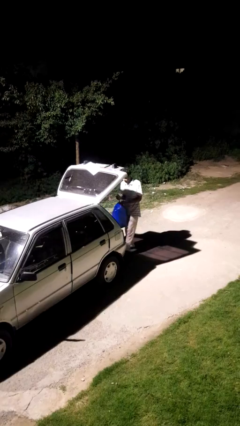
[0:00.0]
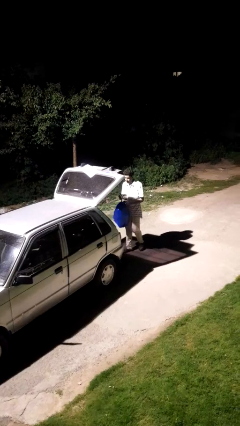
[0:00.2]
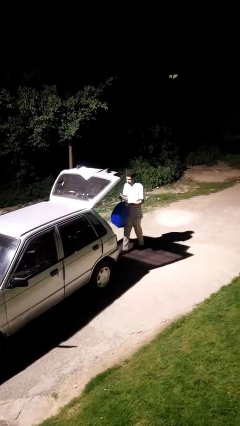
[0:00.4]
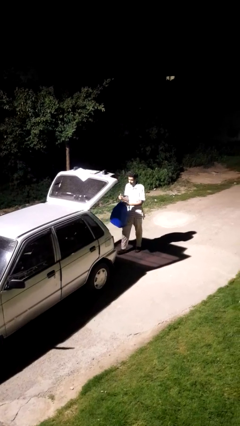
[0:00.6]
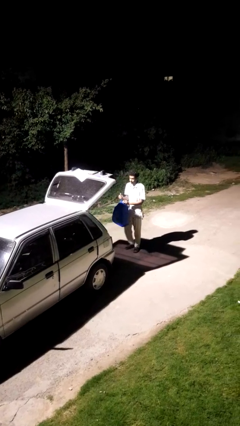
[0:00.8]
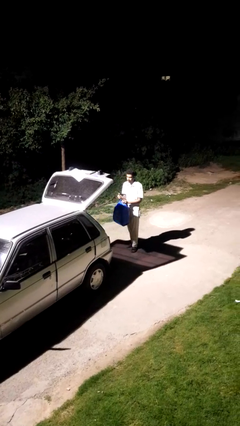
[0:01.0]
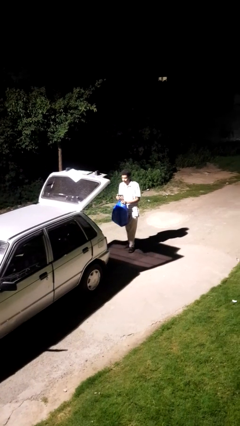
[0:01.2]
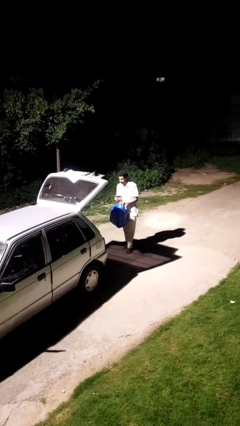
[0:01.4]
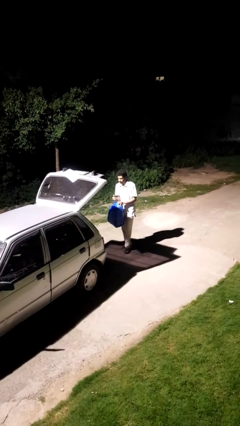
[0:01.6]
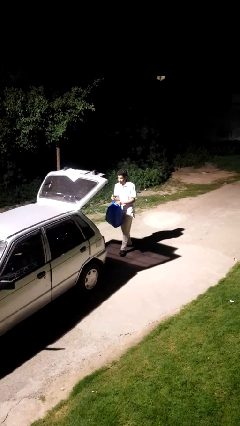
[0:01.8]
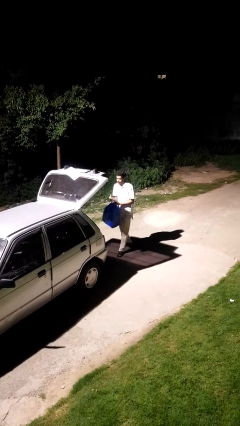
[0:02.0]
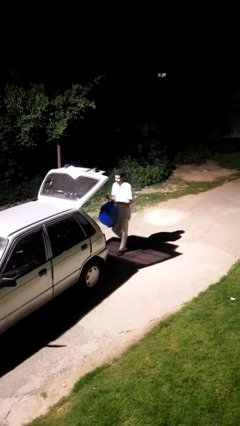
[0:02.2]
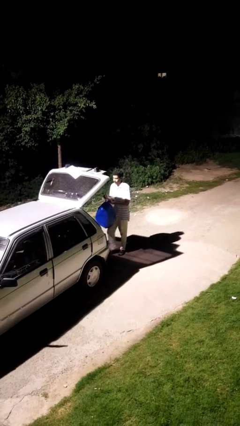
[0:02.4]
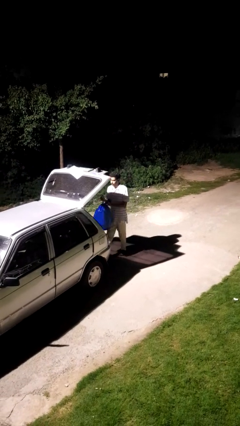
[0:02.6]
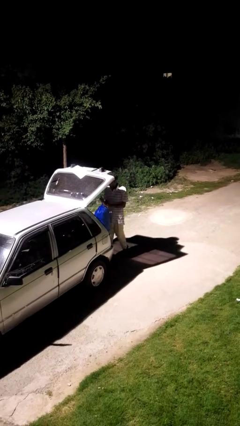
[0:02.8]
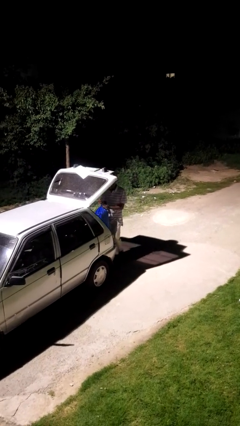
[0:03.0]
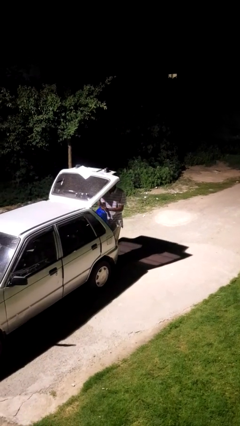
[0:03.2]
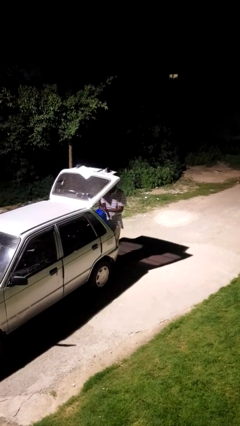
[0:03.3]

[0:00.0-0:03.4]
person unloads car

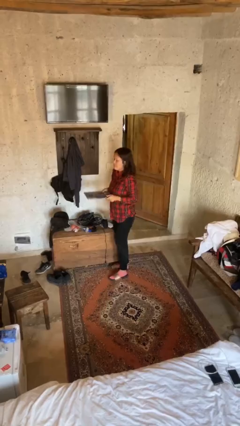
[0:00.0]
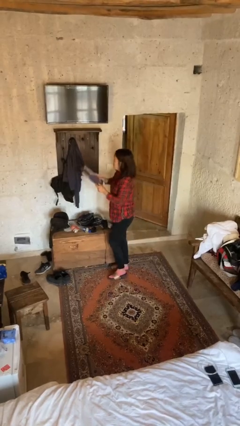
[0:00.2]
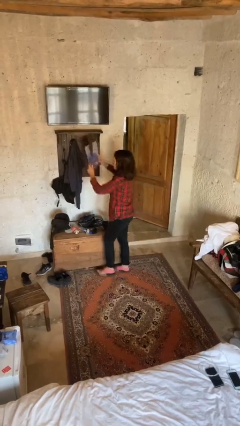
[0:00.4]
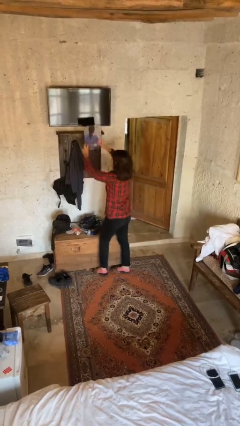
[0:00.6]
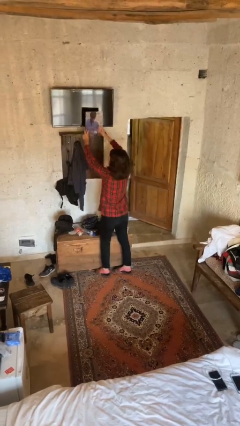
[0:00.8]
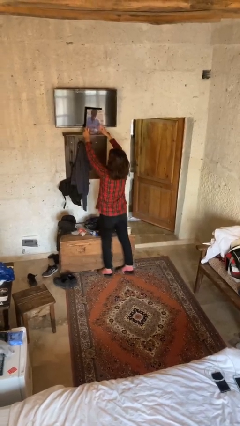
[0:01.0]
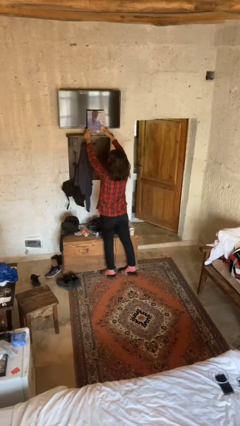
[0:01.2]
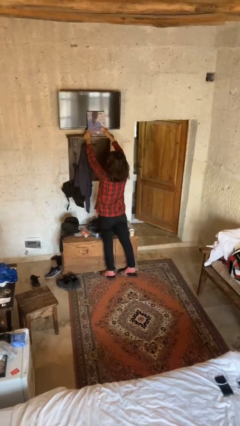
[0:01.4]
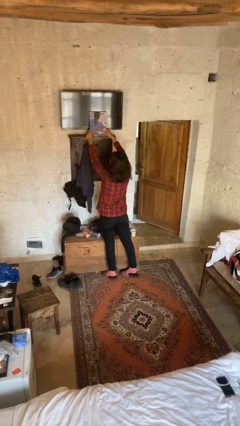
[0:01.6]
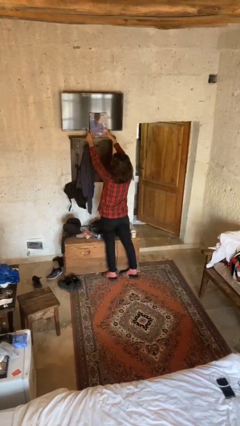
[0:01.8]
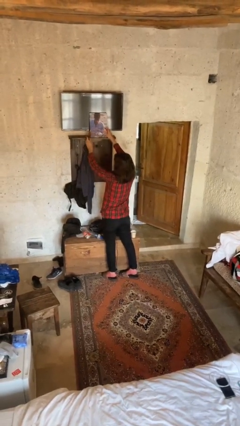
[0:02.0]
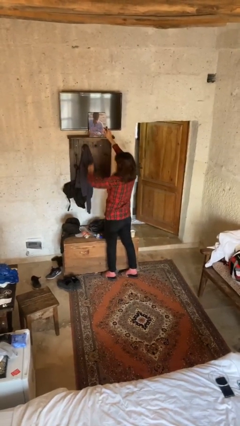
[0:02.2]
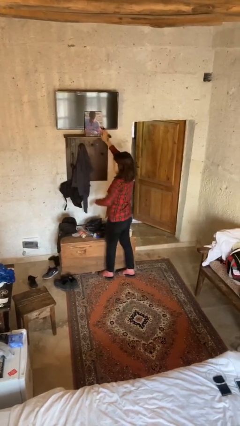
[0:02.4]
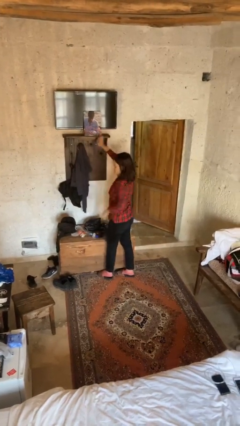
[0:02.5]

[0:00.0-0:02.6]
person puts down object on shelf

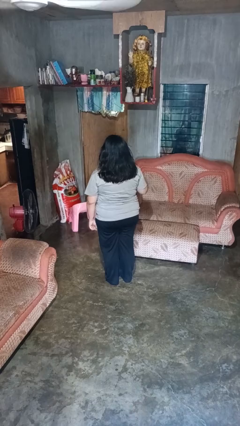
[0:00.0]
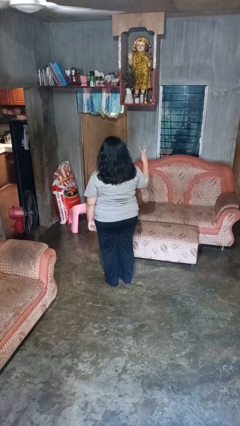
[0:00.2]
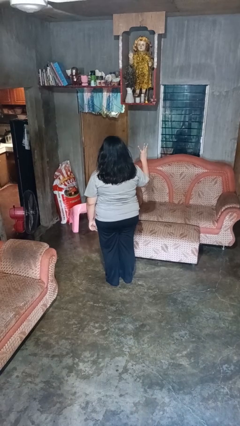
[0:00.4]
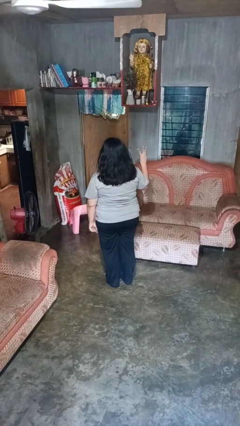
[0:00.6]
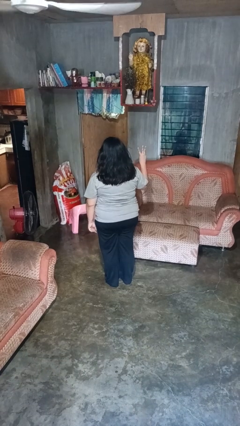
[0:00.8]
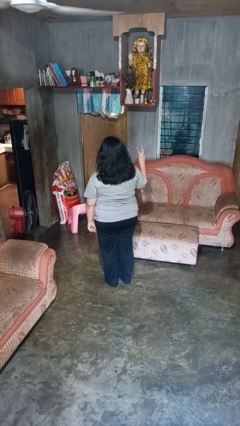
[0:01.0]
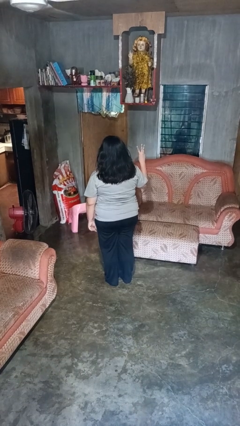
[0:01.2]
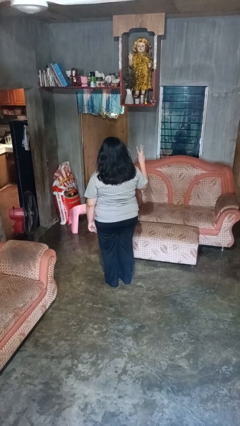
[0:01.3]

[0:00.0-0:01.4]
person gestures number three

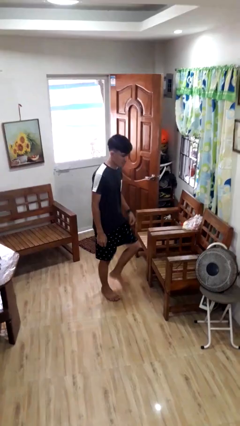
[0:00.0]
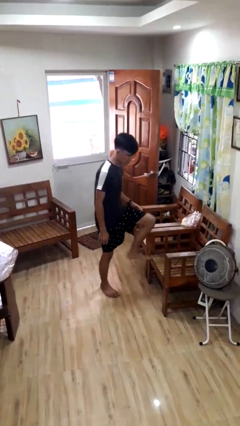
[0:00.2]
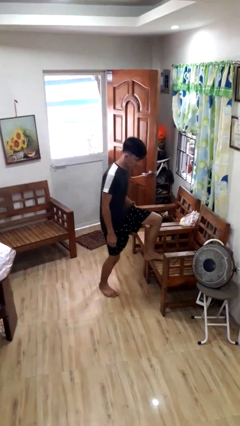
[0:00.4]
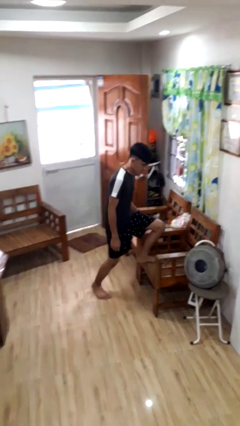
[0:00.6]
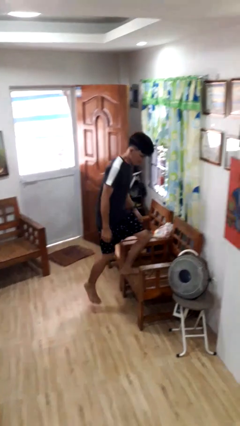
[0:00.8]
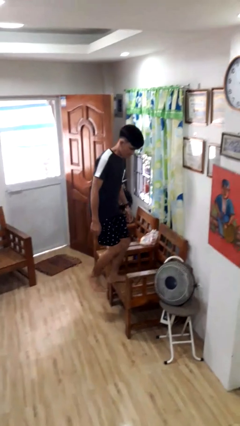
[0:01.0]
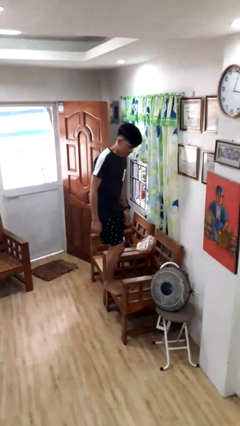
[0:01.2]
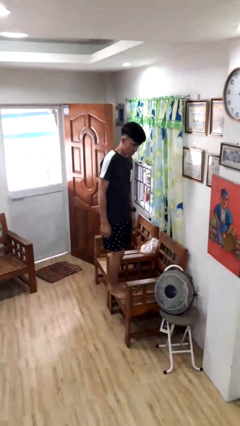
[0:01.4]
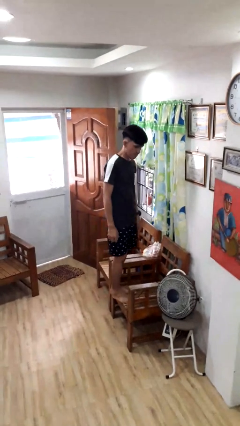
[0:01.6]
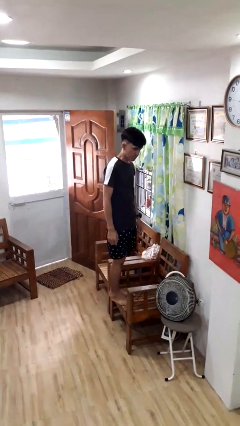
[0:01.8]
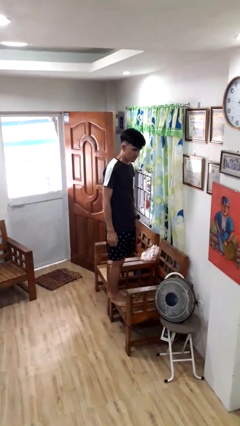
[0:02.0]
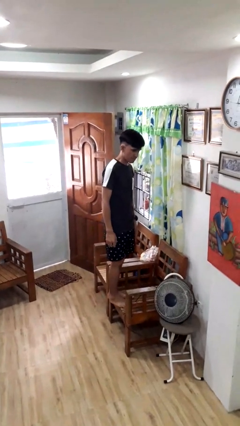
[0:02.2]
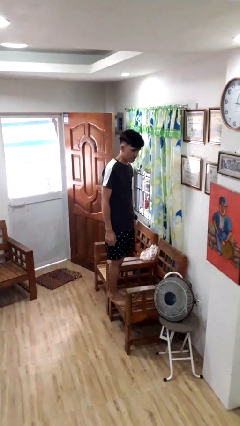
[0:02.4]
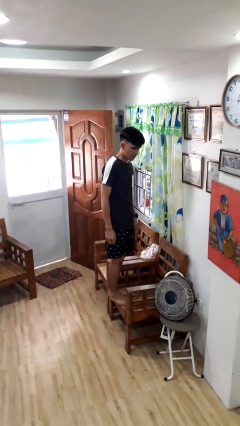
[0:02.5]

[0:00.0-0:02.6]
person climbs on chair

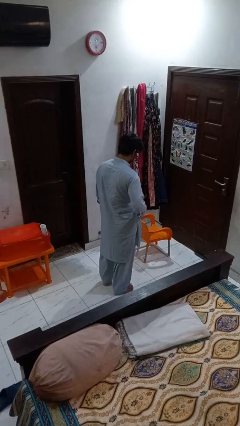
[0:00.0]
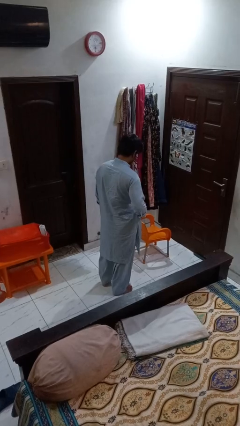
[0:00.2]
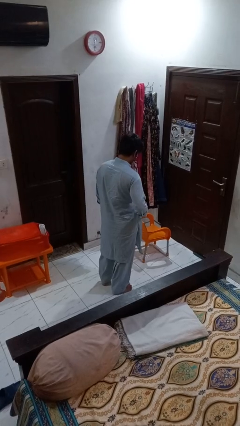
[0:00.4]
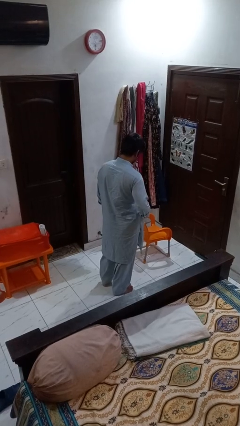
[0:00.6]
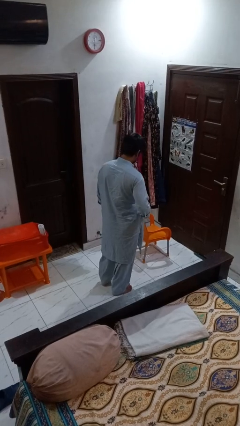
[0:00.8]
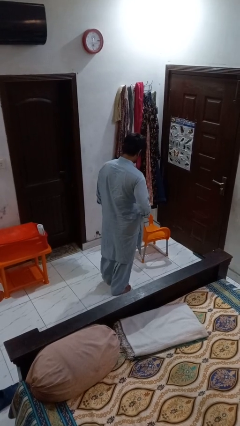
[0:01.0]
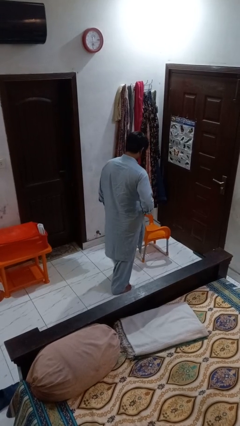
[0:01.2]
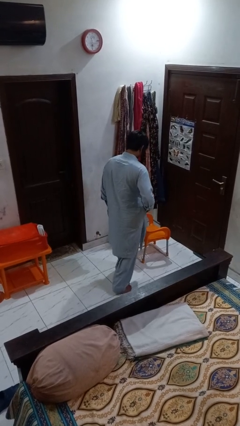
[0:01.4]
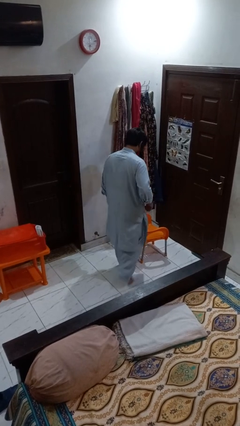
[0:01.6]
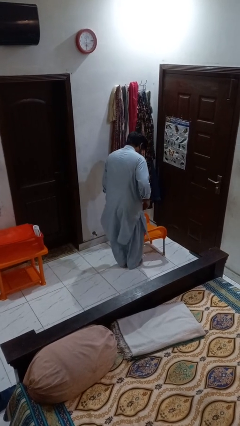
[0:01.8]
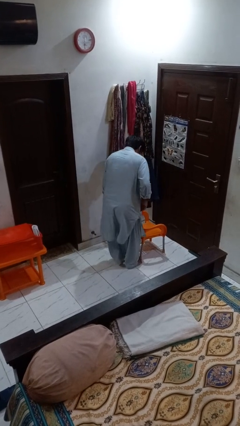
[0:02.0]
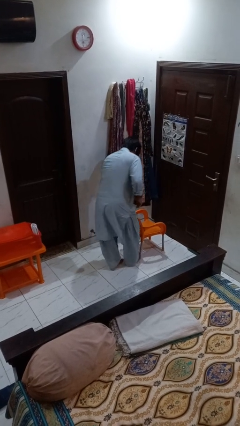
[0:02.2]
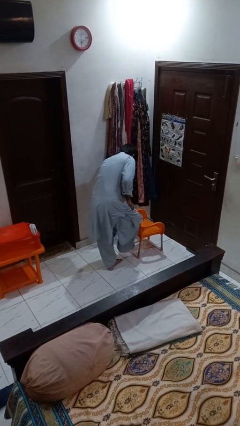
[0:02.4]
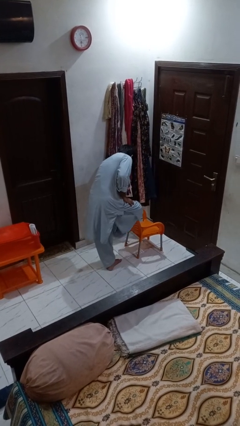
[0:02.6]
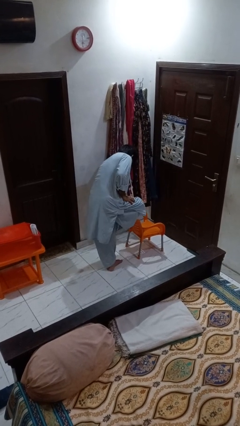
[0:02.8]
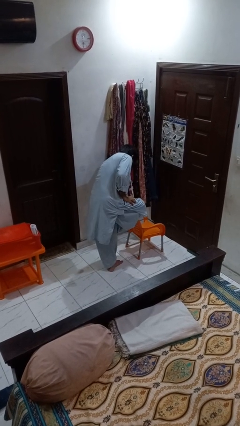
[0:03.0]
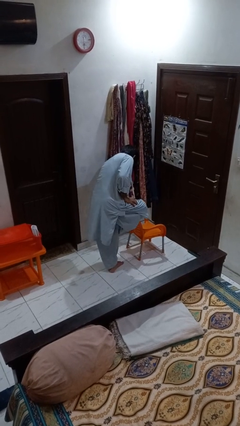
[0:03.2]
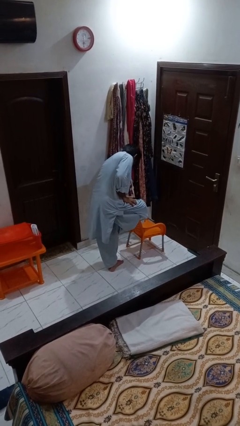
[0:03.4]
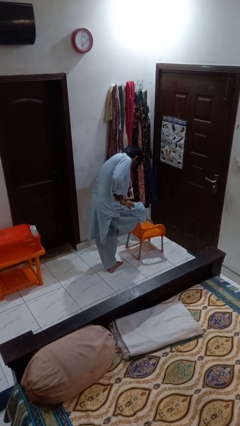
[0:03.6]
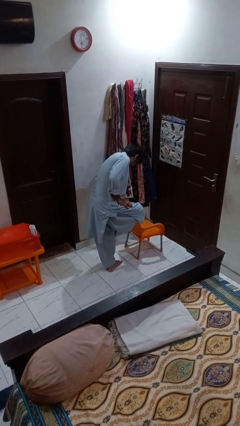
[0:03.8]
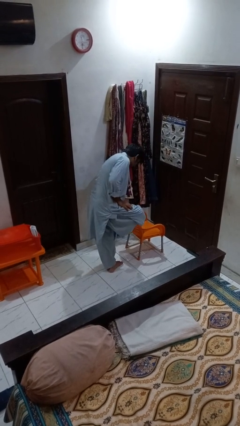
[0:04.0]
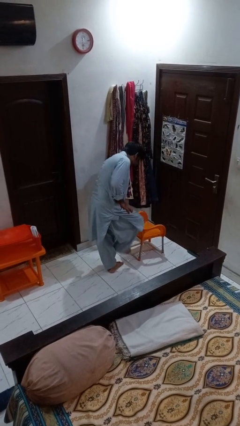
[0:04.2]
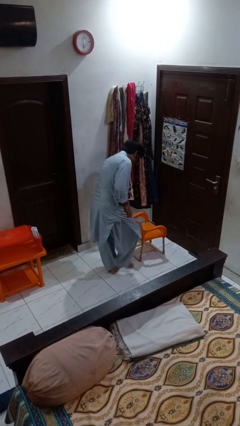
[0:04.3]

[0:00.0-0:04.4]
person stubs toe

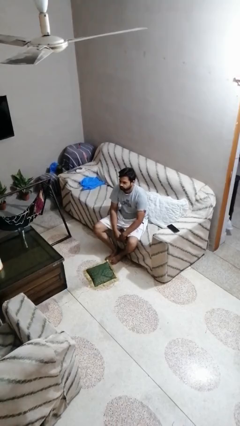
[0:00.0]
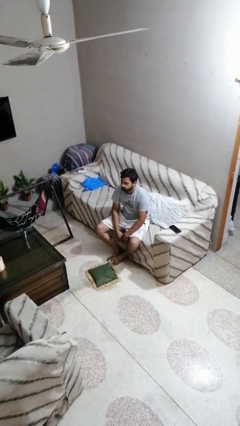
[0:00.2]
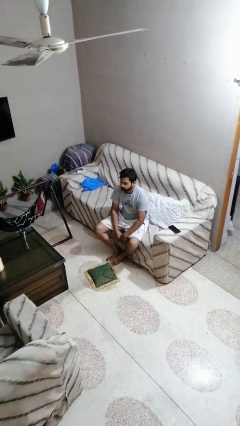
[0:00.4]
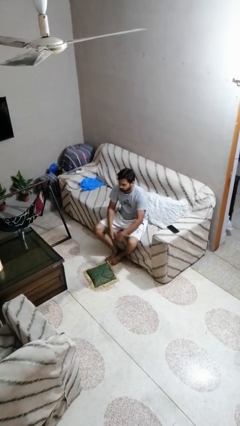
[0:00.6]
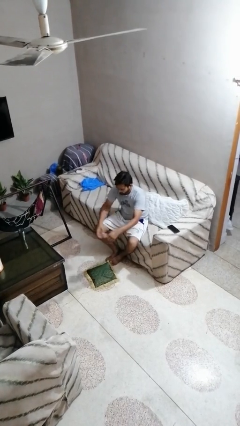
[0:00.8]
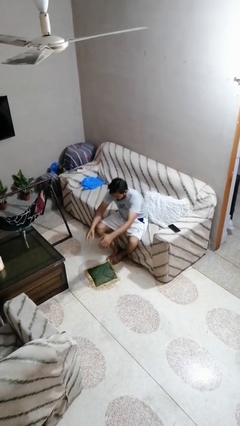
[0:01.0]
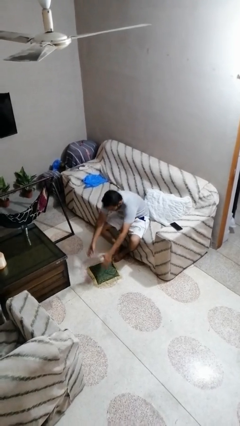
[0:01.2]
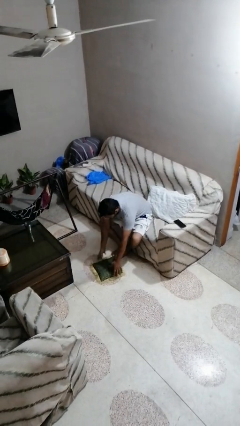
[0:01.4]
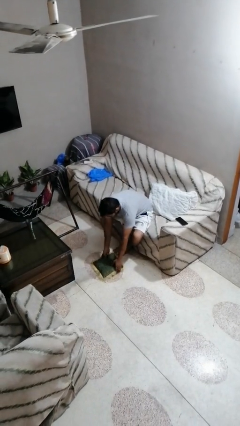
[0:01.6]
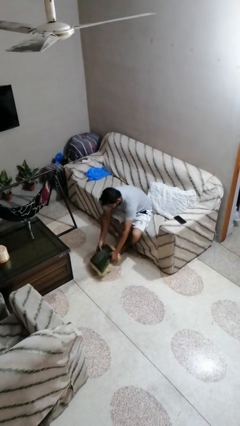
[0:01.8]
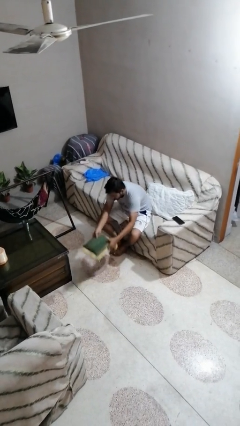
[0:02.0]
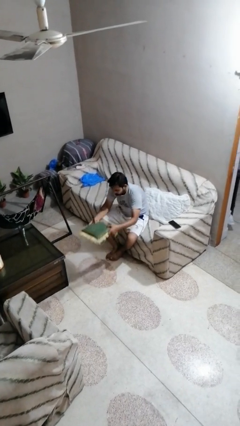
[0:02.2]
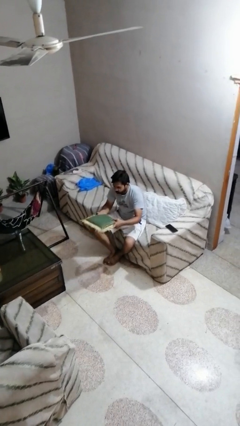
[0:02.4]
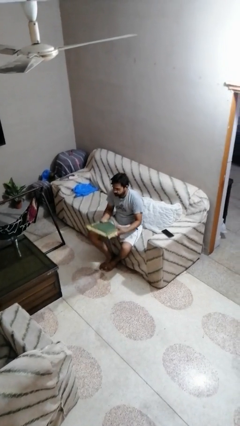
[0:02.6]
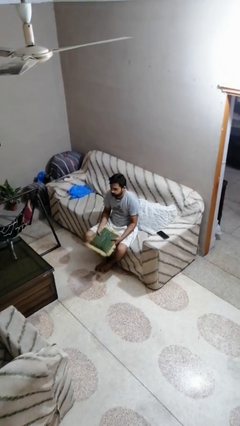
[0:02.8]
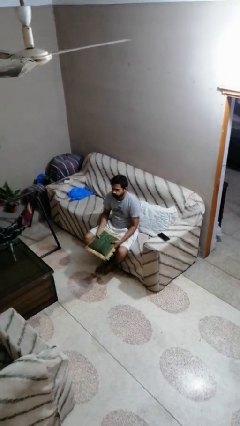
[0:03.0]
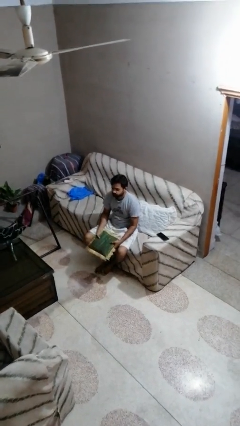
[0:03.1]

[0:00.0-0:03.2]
person picks up object from floor

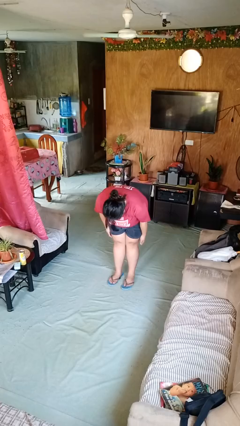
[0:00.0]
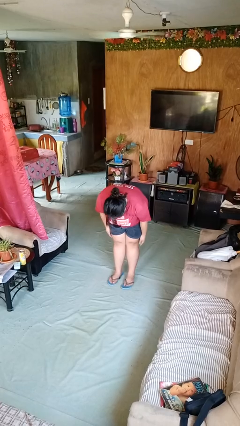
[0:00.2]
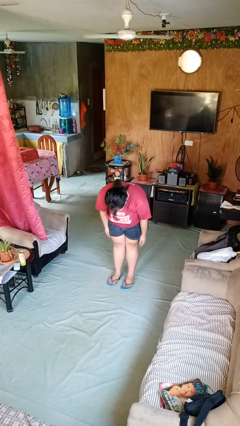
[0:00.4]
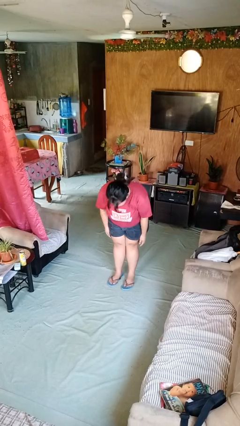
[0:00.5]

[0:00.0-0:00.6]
person bows
